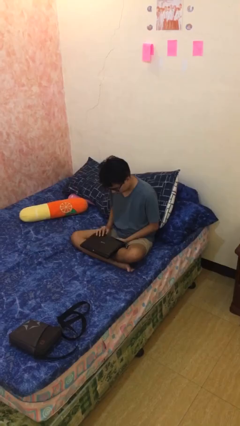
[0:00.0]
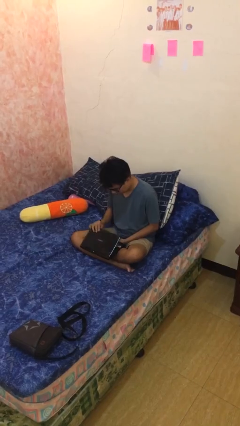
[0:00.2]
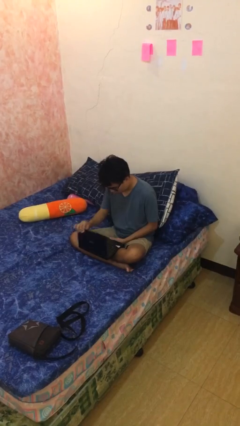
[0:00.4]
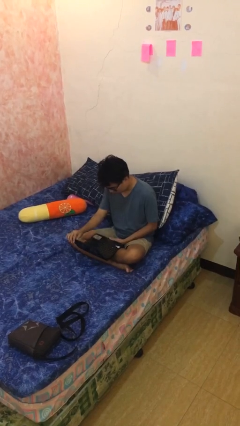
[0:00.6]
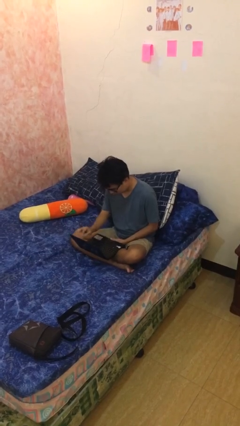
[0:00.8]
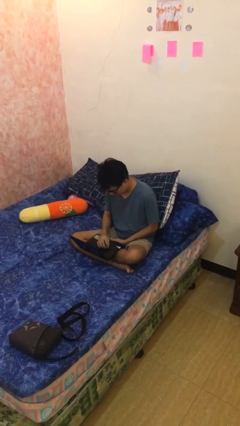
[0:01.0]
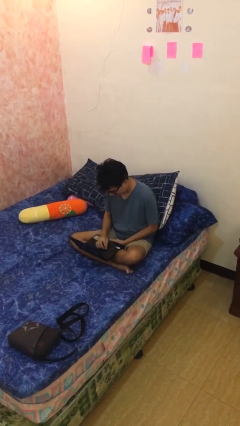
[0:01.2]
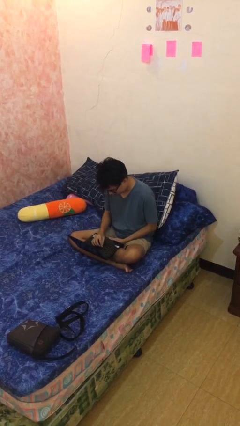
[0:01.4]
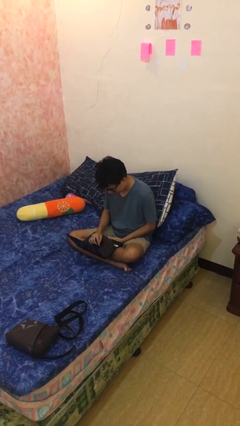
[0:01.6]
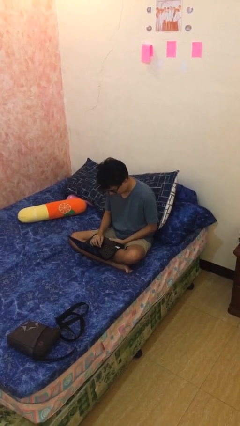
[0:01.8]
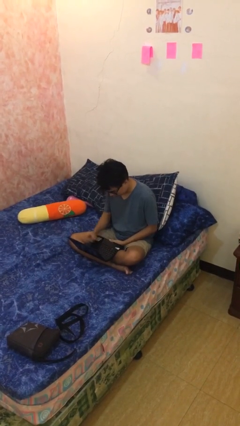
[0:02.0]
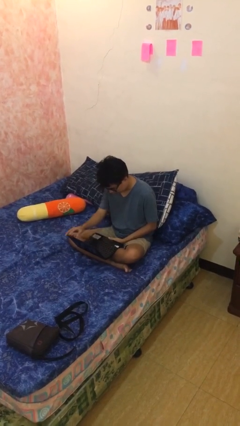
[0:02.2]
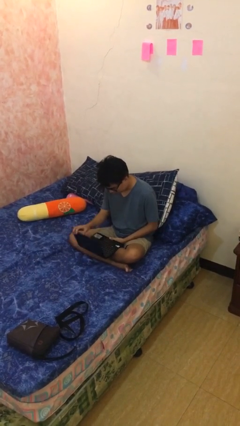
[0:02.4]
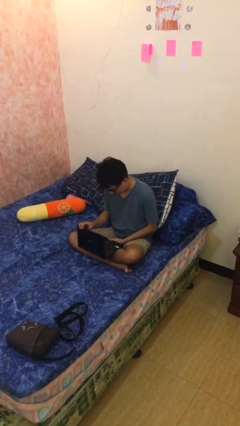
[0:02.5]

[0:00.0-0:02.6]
person interacts with laptop

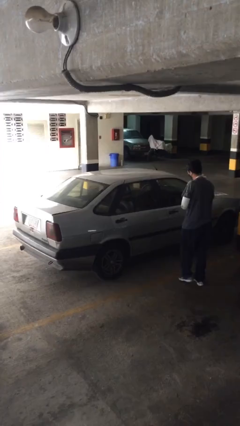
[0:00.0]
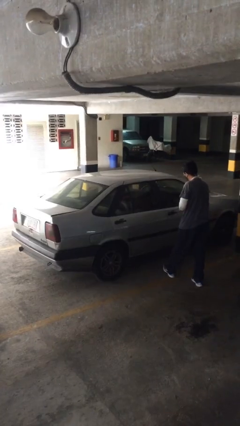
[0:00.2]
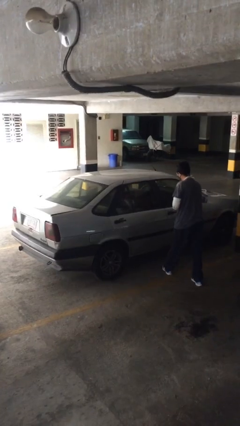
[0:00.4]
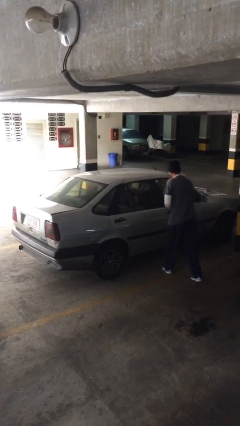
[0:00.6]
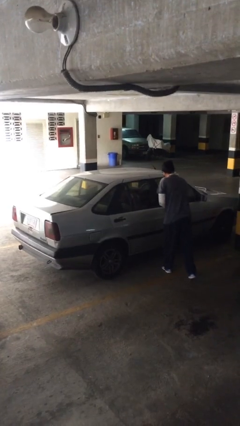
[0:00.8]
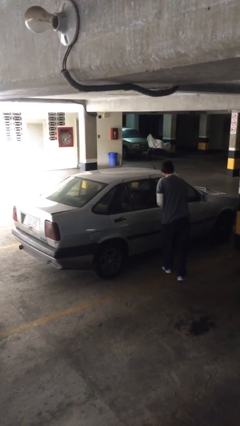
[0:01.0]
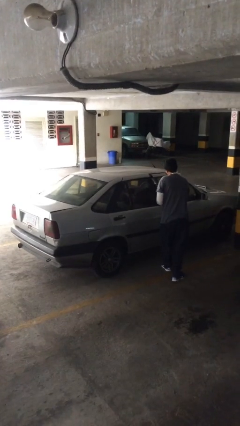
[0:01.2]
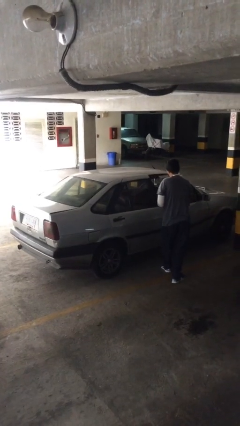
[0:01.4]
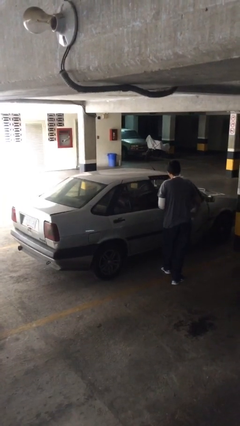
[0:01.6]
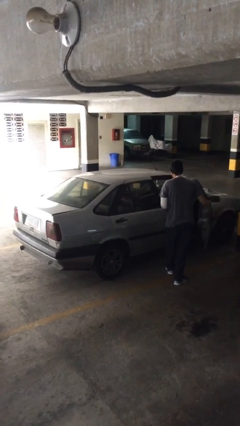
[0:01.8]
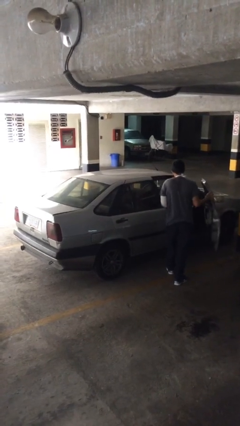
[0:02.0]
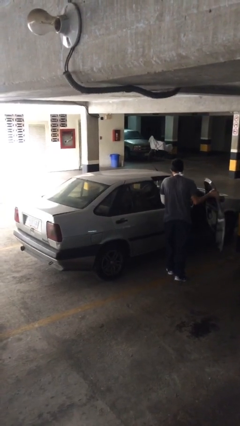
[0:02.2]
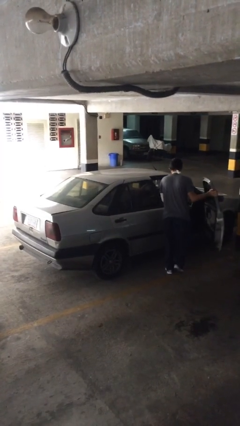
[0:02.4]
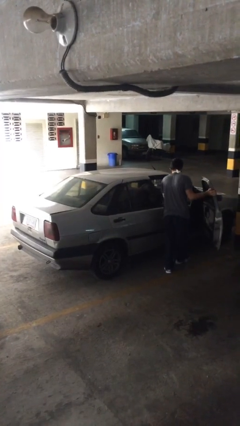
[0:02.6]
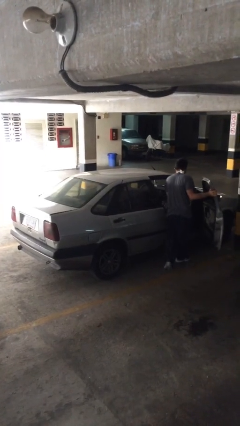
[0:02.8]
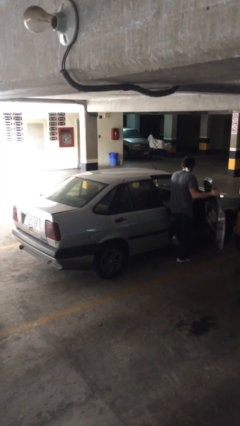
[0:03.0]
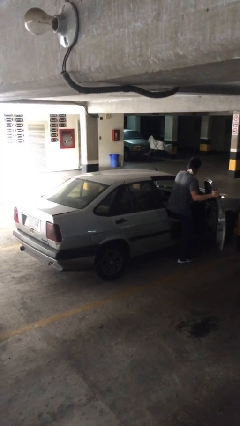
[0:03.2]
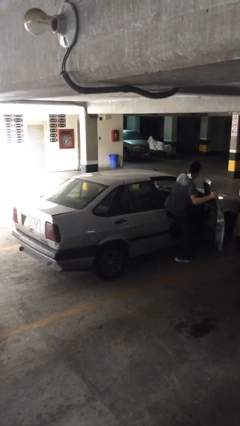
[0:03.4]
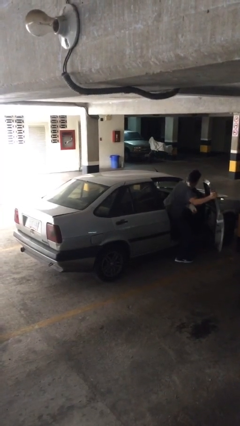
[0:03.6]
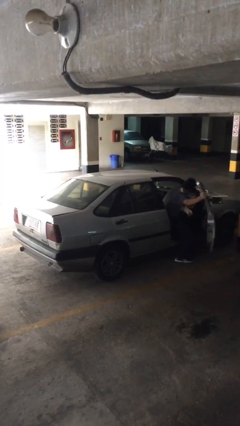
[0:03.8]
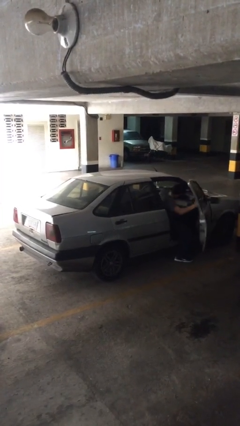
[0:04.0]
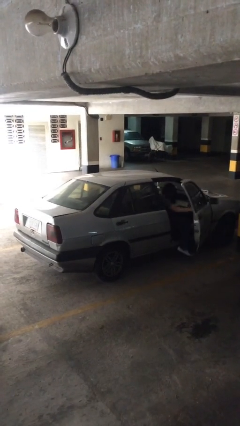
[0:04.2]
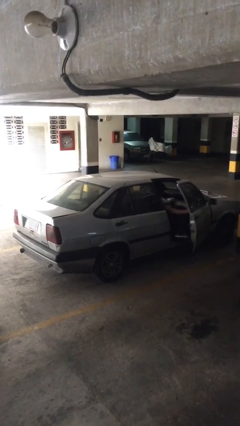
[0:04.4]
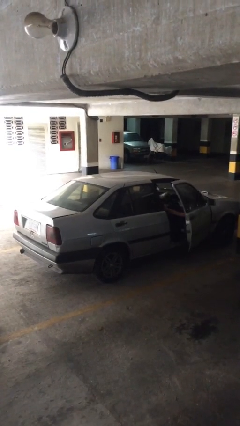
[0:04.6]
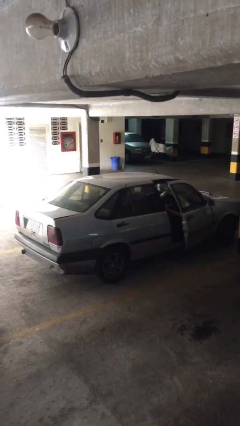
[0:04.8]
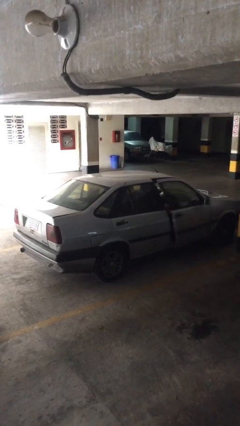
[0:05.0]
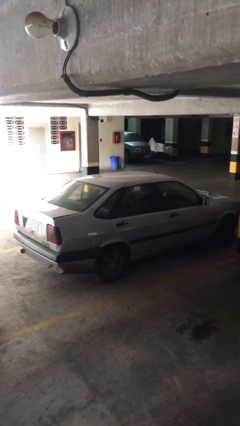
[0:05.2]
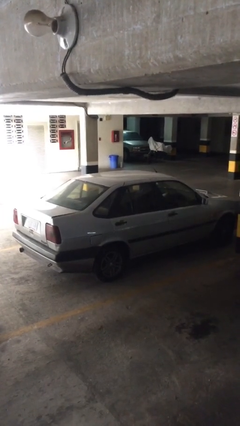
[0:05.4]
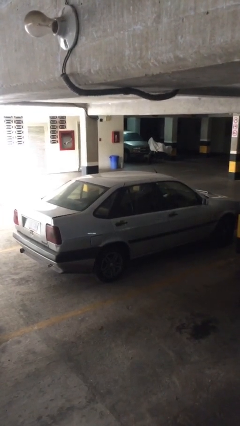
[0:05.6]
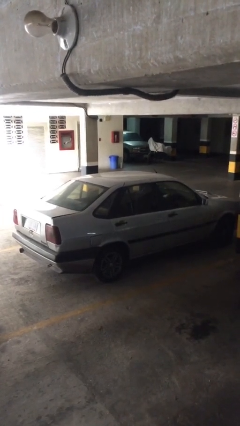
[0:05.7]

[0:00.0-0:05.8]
car picks up person

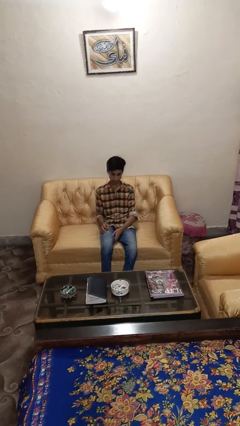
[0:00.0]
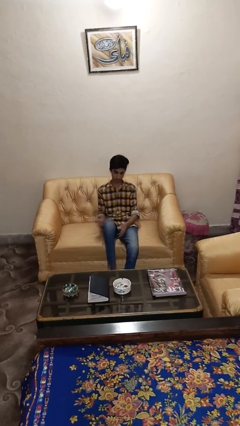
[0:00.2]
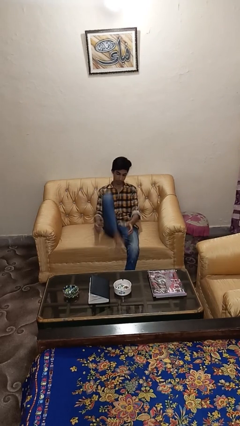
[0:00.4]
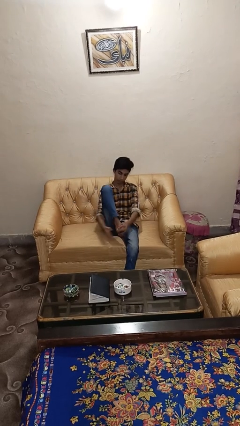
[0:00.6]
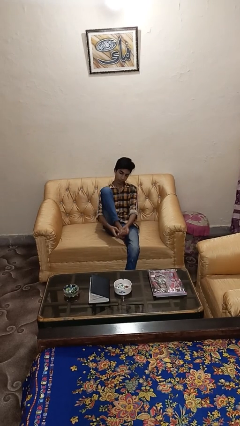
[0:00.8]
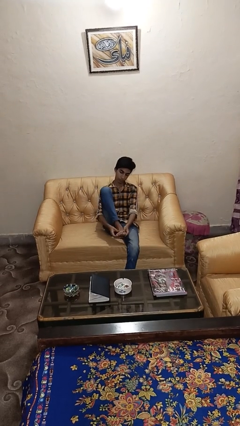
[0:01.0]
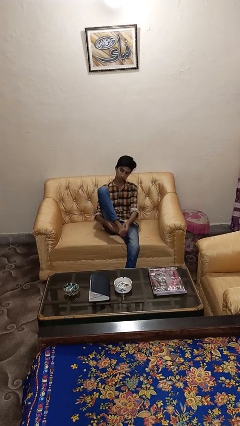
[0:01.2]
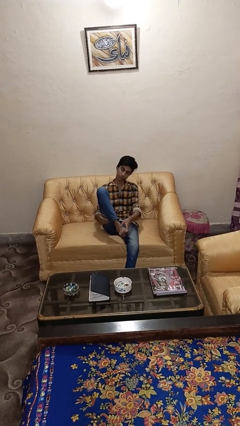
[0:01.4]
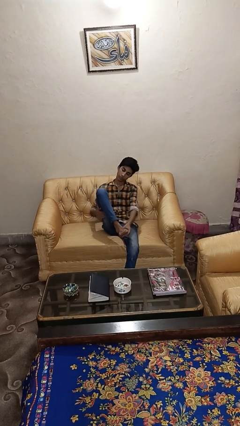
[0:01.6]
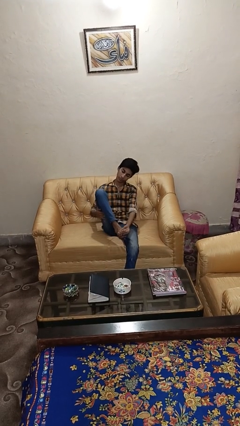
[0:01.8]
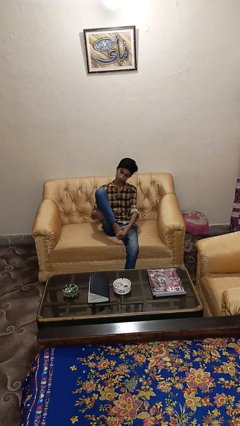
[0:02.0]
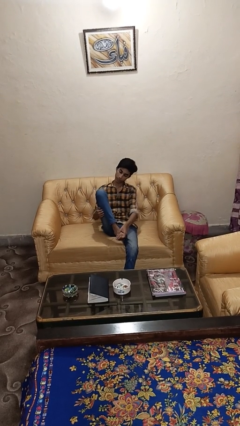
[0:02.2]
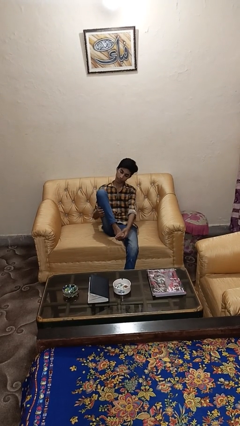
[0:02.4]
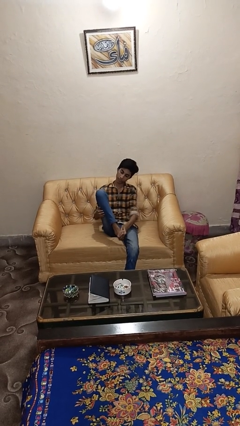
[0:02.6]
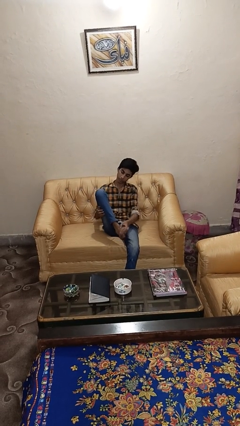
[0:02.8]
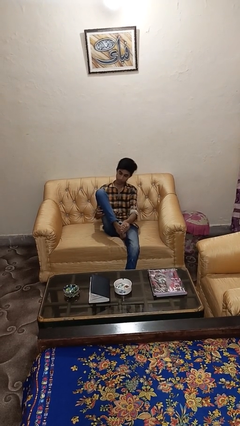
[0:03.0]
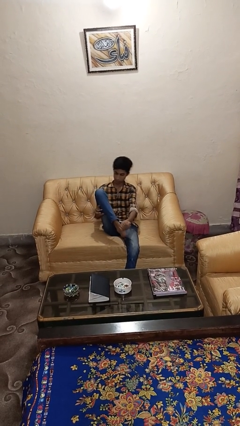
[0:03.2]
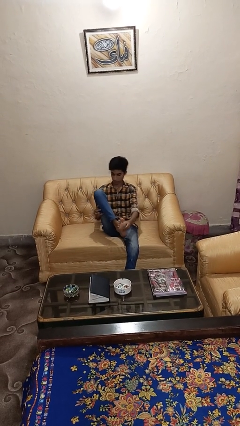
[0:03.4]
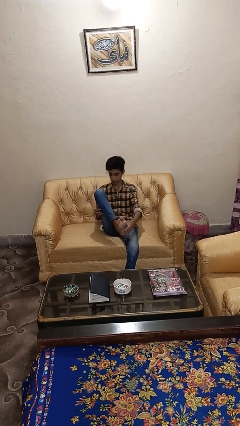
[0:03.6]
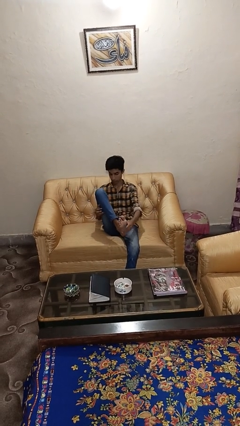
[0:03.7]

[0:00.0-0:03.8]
person rubs foot

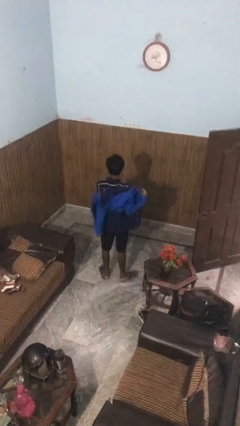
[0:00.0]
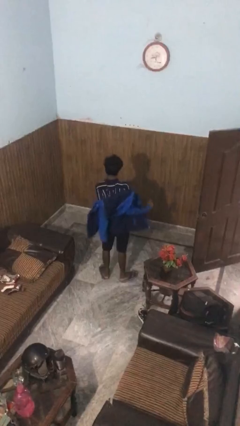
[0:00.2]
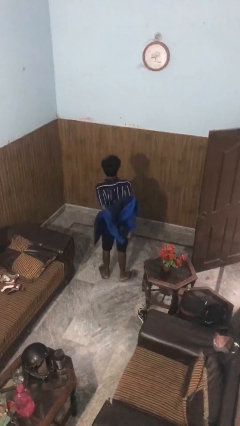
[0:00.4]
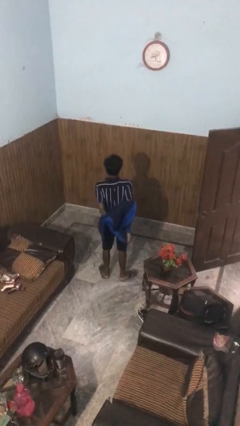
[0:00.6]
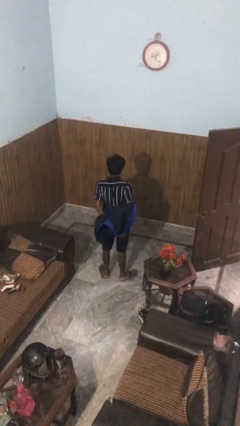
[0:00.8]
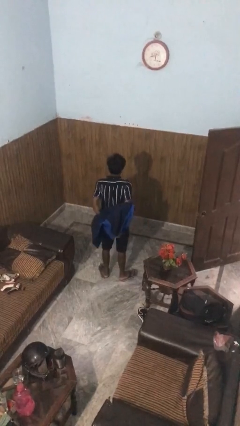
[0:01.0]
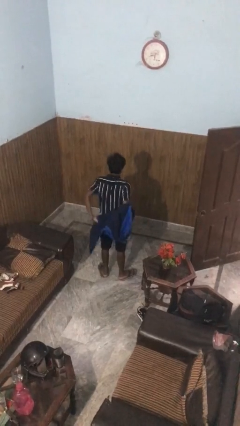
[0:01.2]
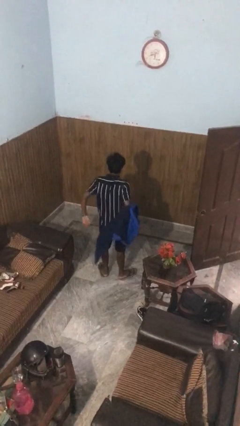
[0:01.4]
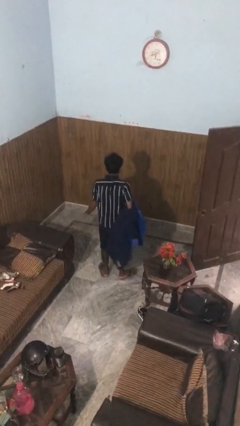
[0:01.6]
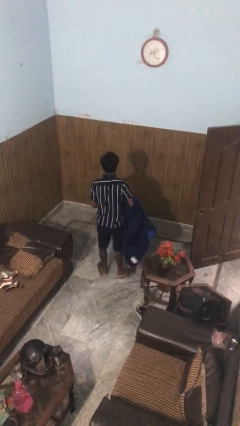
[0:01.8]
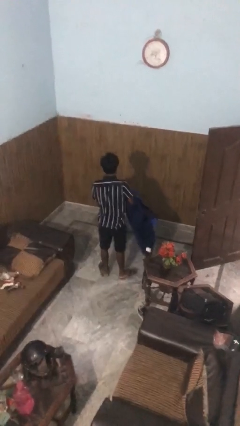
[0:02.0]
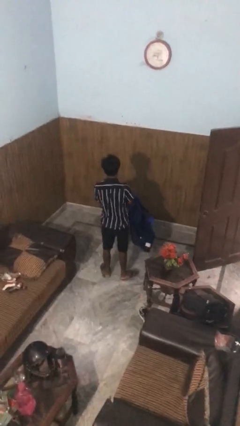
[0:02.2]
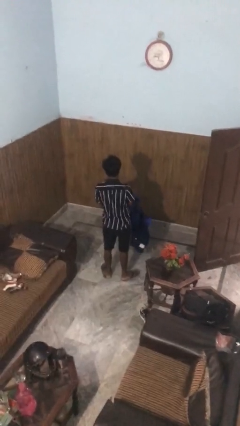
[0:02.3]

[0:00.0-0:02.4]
person takes off jacket

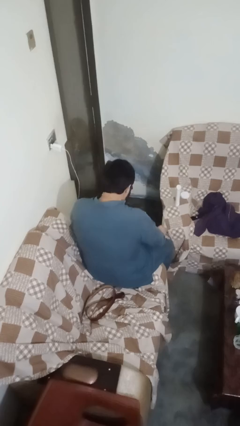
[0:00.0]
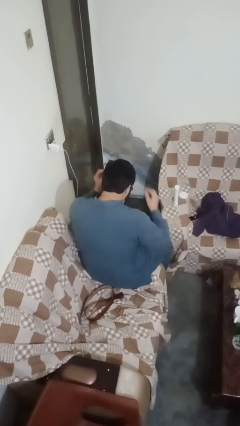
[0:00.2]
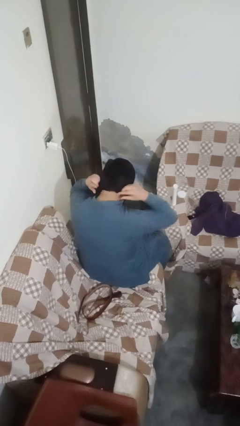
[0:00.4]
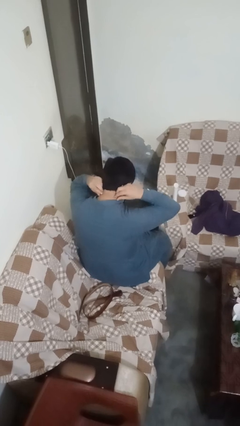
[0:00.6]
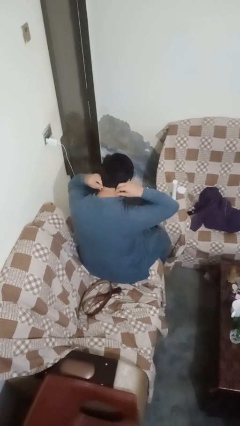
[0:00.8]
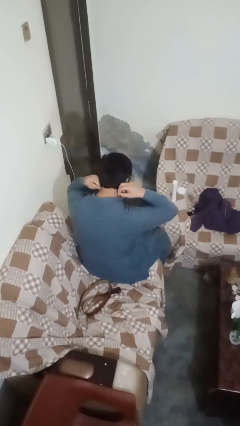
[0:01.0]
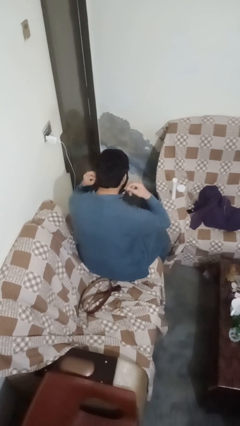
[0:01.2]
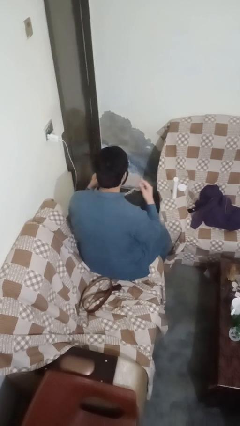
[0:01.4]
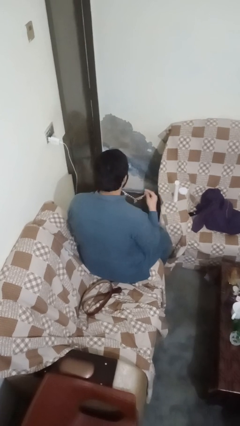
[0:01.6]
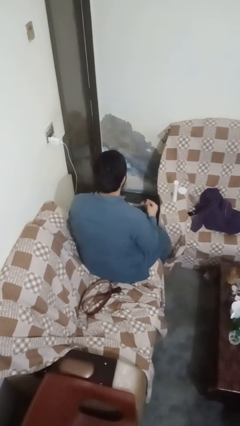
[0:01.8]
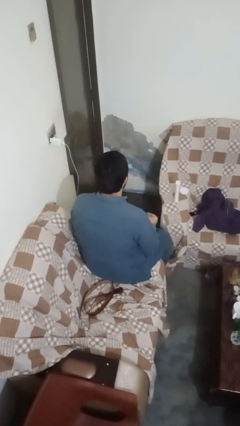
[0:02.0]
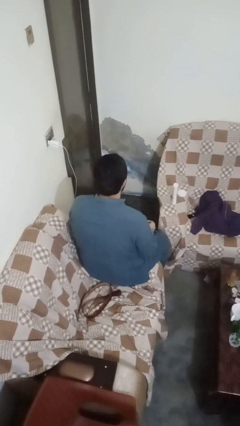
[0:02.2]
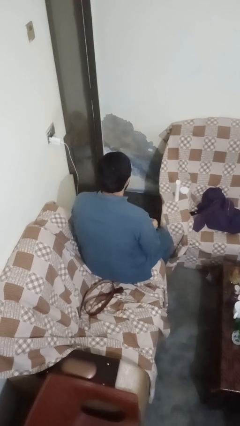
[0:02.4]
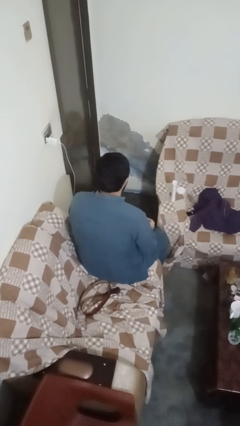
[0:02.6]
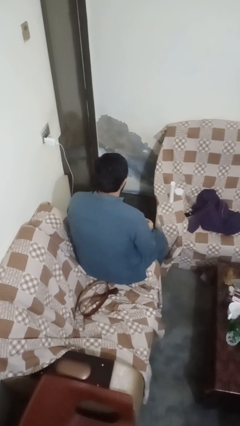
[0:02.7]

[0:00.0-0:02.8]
person takes off necklace

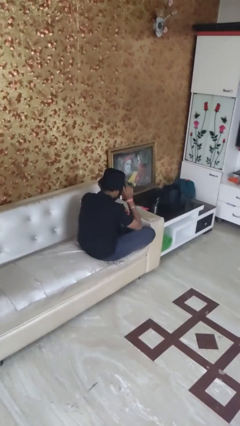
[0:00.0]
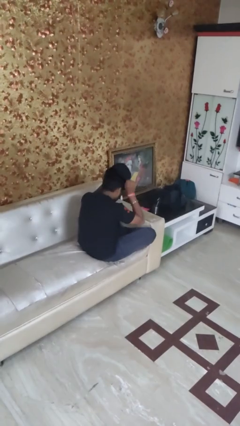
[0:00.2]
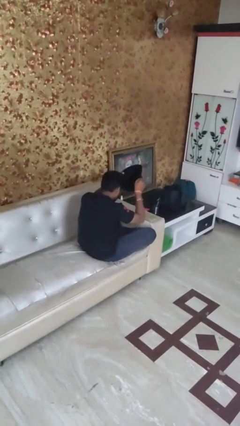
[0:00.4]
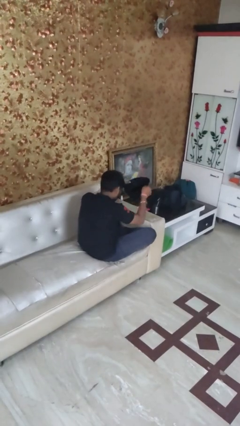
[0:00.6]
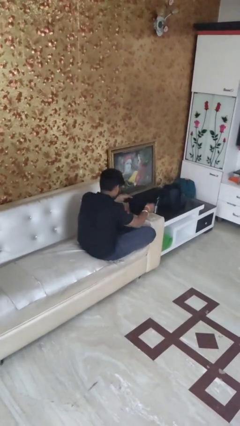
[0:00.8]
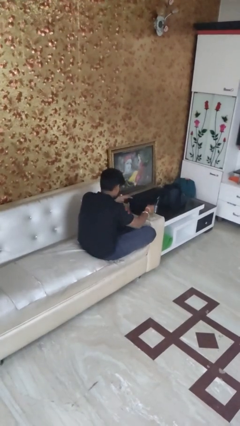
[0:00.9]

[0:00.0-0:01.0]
person takes off hat
